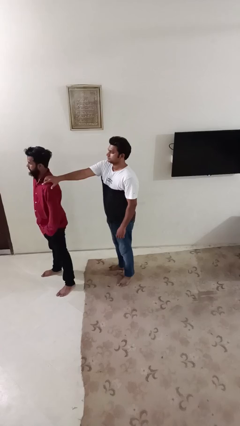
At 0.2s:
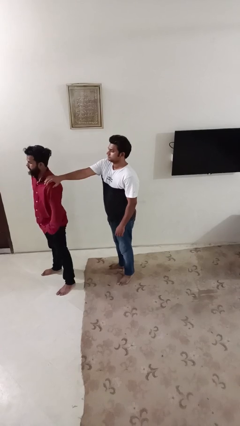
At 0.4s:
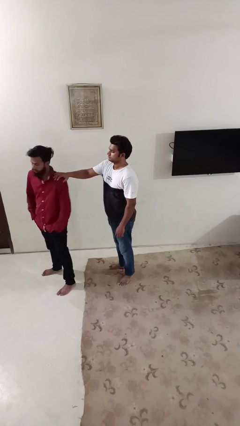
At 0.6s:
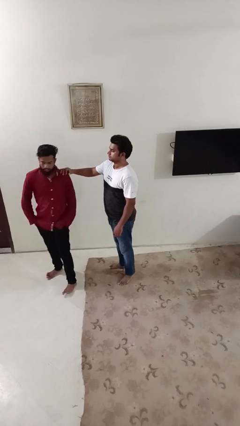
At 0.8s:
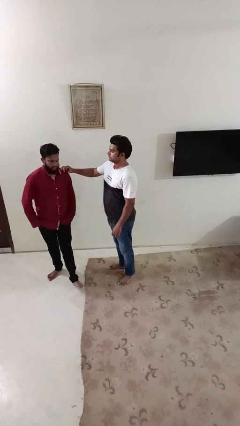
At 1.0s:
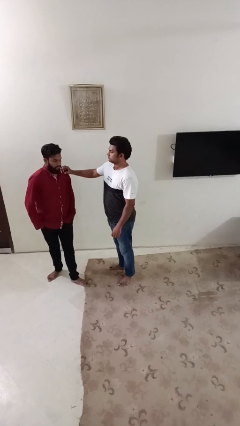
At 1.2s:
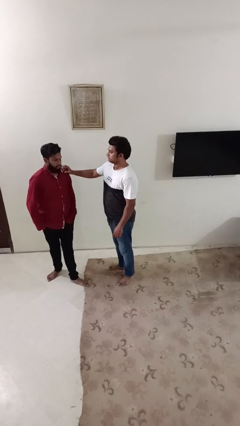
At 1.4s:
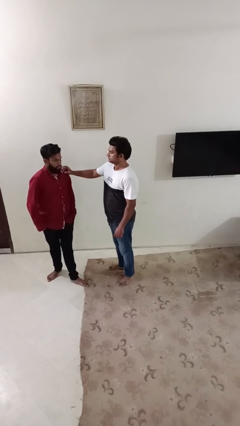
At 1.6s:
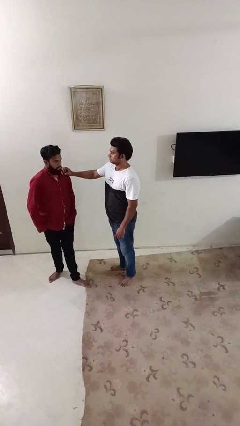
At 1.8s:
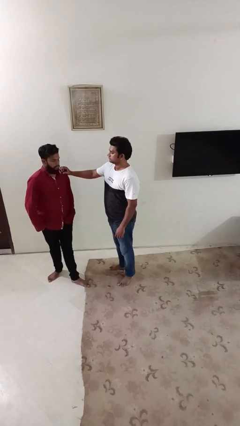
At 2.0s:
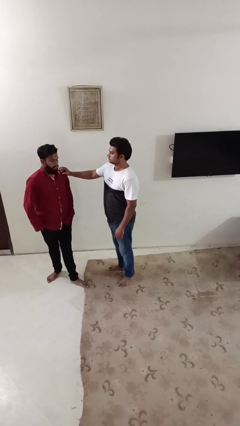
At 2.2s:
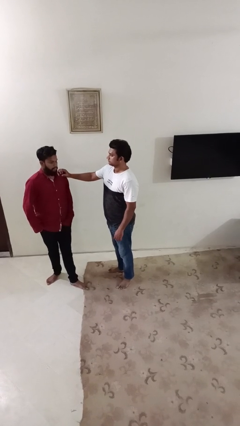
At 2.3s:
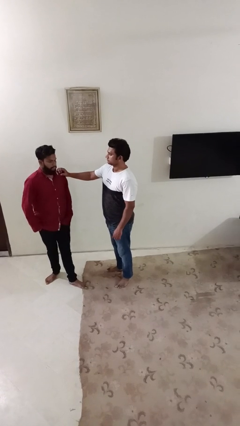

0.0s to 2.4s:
person spins person around

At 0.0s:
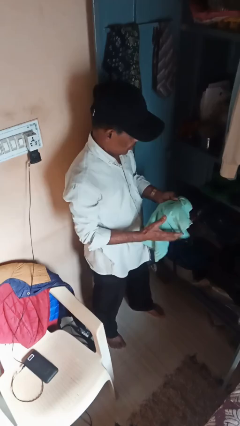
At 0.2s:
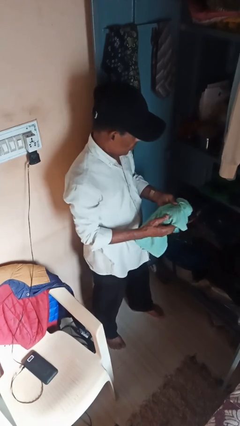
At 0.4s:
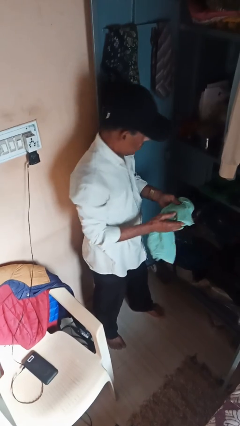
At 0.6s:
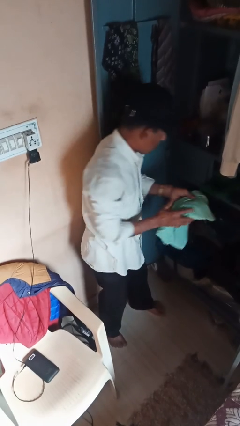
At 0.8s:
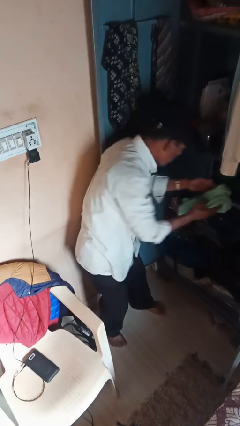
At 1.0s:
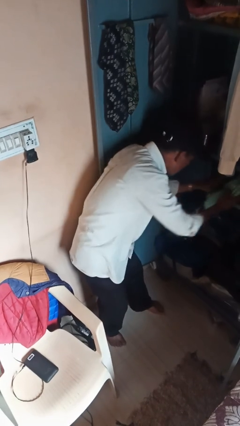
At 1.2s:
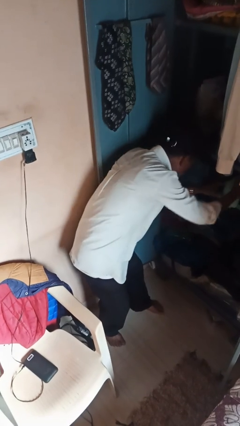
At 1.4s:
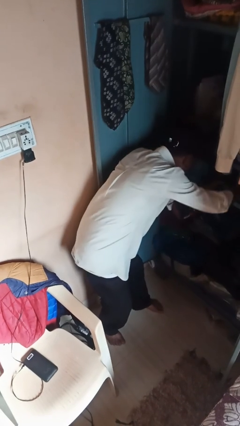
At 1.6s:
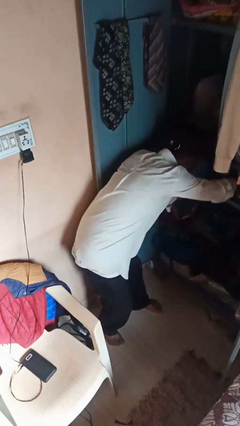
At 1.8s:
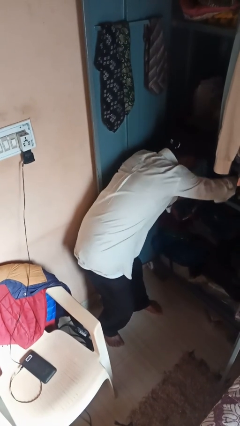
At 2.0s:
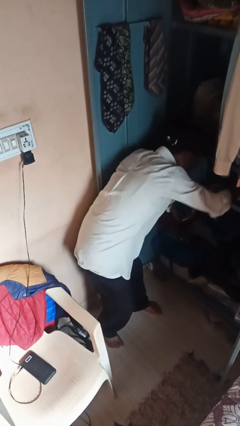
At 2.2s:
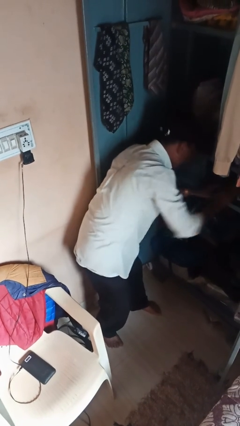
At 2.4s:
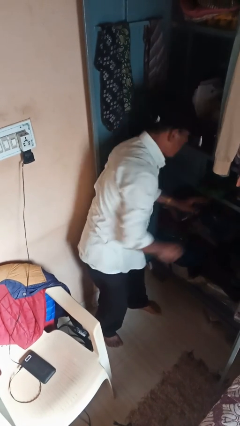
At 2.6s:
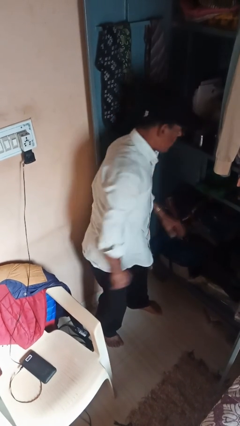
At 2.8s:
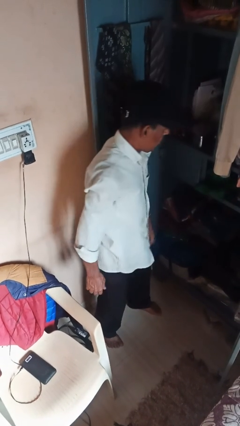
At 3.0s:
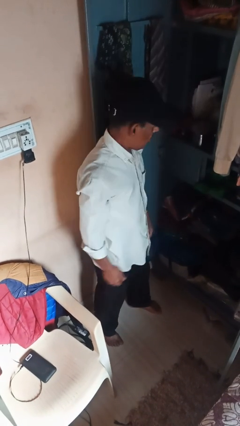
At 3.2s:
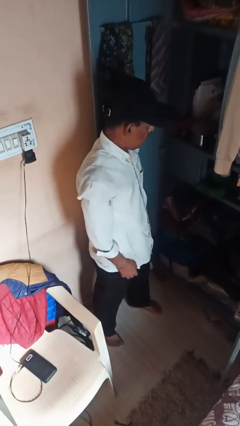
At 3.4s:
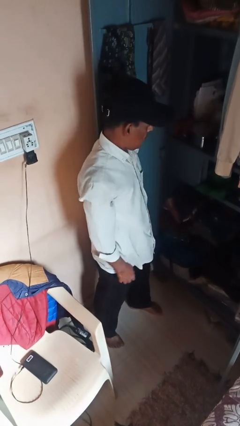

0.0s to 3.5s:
person puts clothes into dresser

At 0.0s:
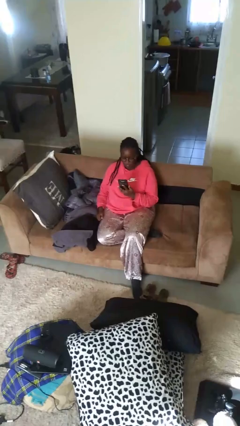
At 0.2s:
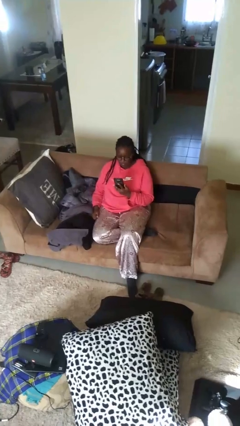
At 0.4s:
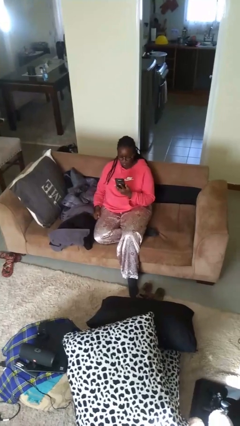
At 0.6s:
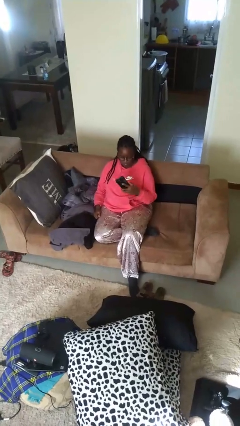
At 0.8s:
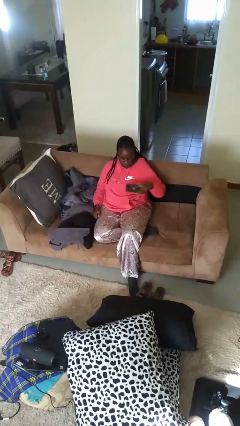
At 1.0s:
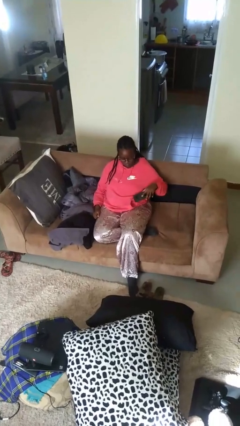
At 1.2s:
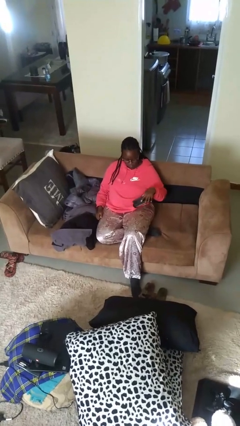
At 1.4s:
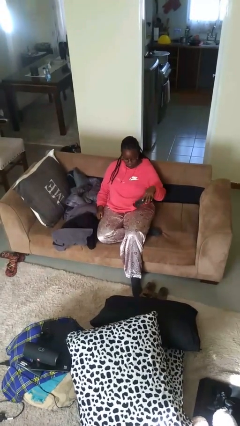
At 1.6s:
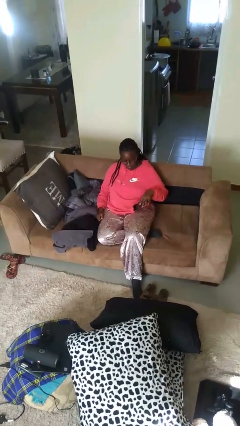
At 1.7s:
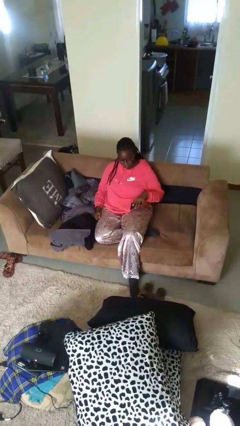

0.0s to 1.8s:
person puts phone into pocket

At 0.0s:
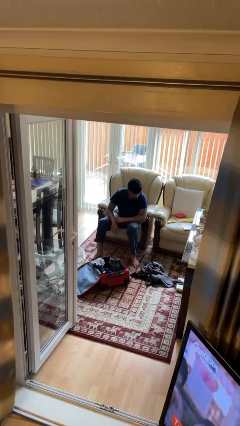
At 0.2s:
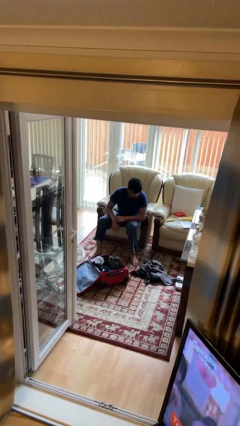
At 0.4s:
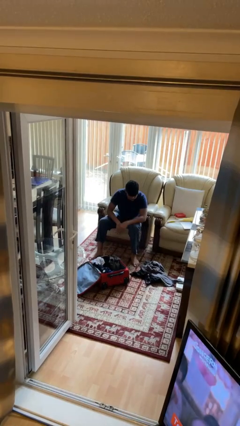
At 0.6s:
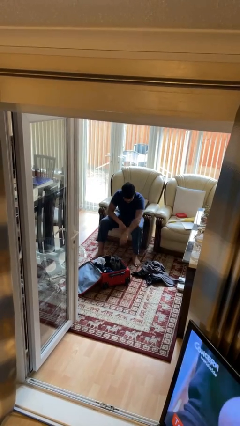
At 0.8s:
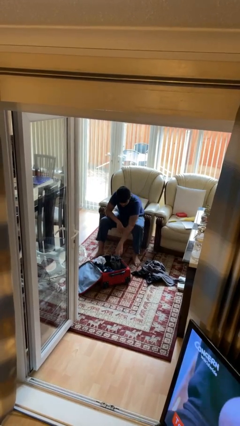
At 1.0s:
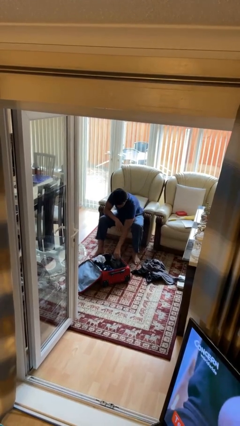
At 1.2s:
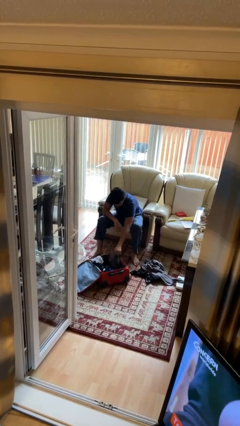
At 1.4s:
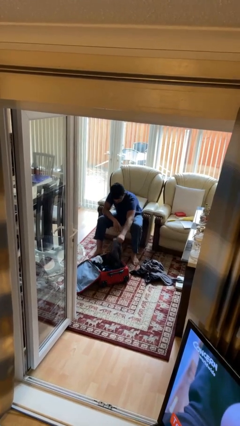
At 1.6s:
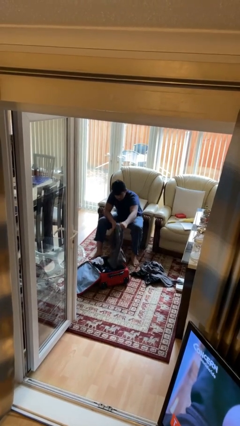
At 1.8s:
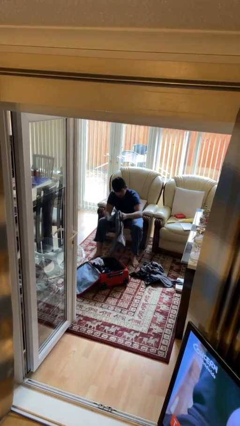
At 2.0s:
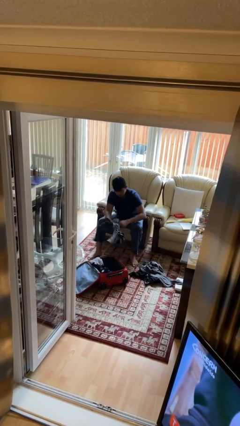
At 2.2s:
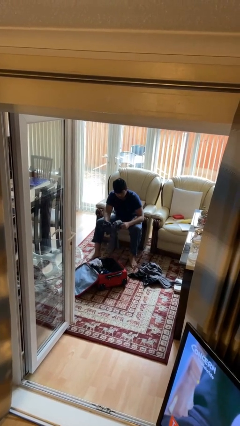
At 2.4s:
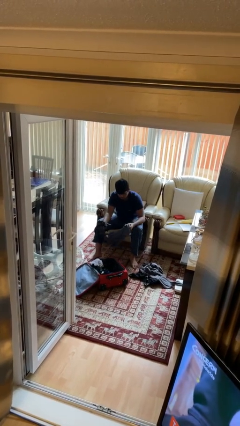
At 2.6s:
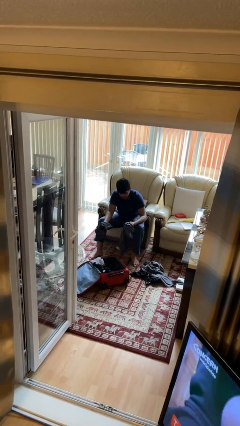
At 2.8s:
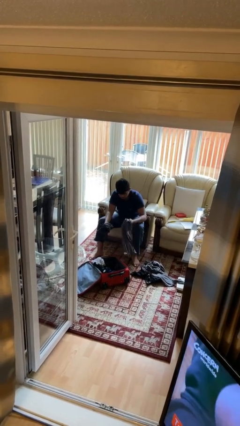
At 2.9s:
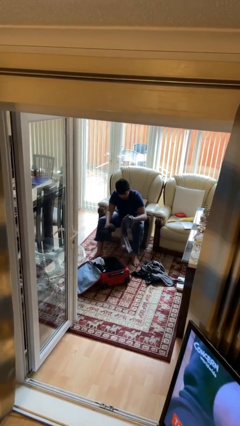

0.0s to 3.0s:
person unloads clothes from suitcase

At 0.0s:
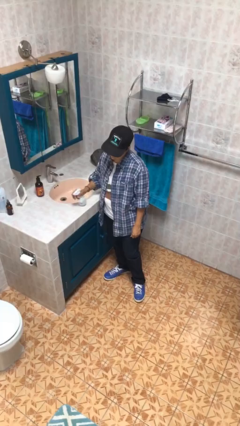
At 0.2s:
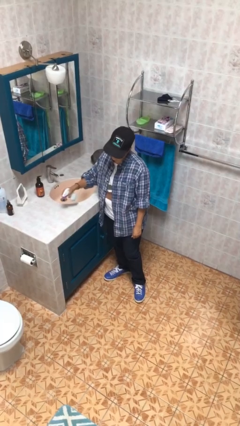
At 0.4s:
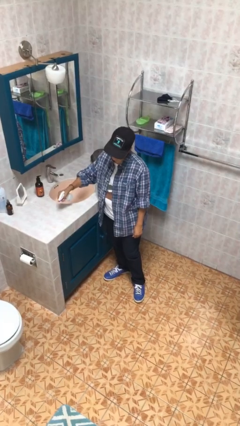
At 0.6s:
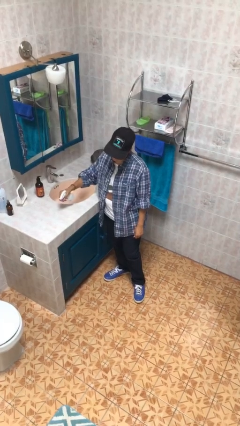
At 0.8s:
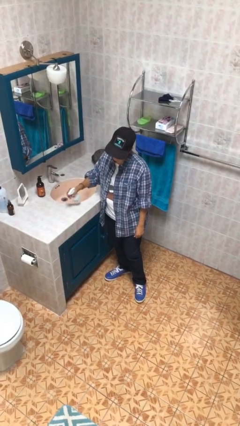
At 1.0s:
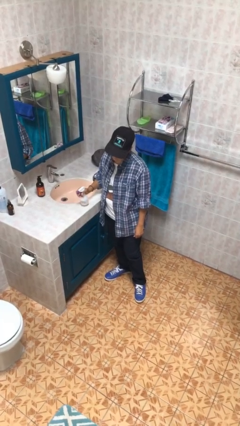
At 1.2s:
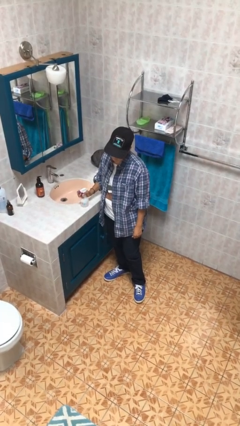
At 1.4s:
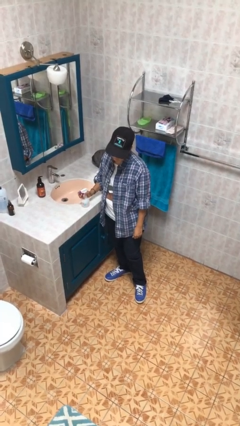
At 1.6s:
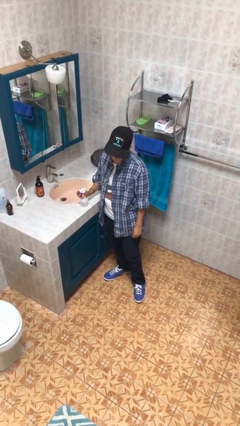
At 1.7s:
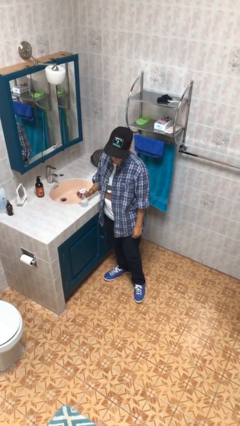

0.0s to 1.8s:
person sprays from bottle

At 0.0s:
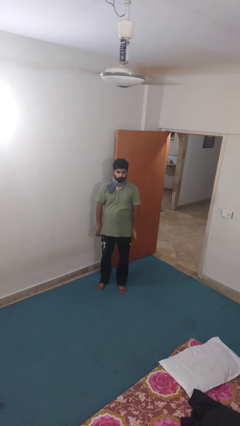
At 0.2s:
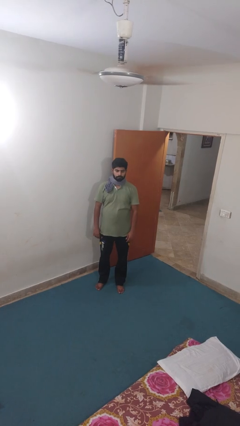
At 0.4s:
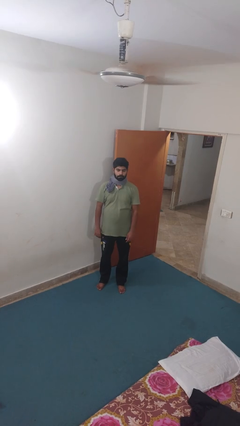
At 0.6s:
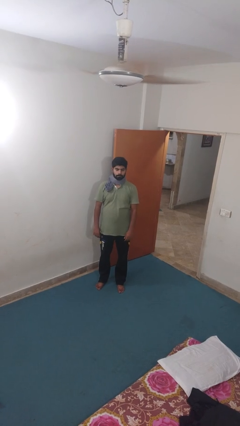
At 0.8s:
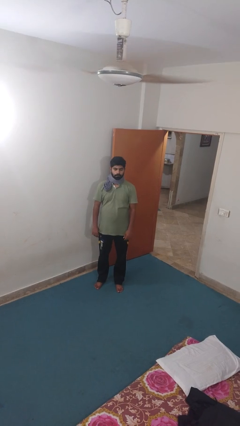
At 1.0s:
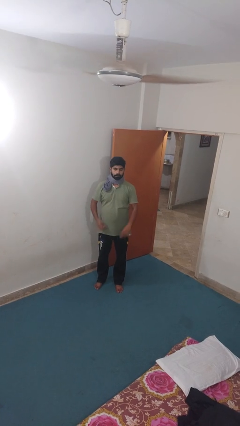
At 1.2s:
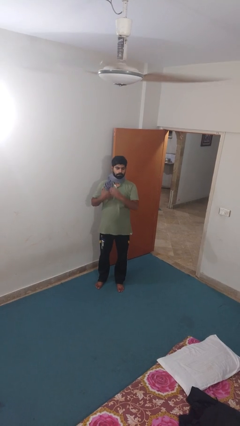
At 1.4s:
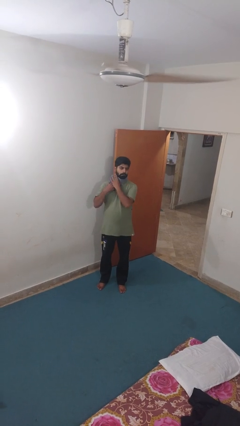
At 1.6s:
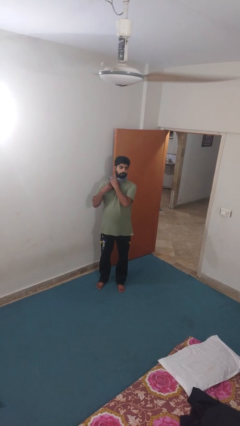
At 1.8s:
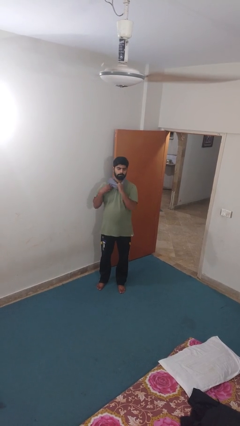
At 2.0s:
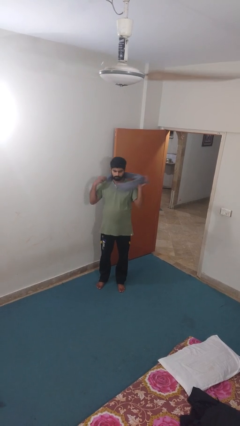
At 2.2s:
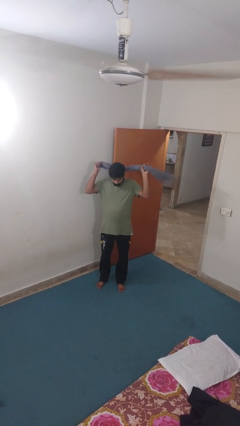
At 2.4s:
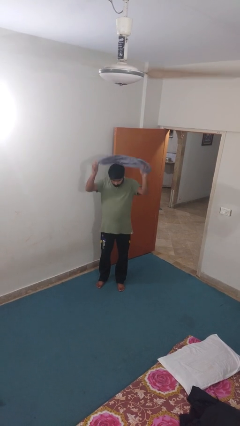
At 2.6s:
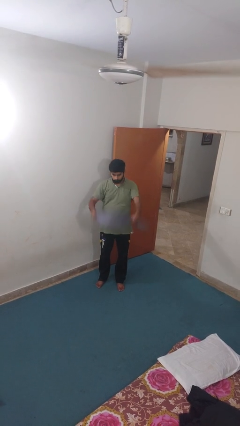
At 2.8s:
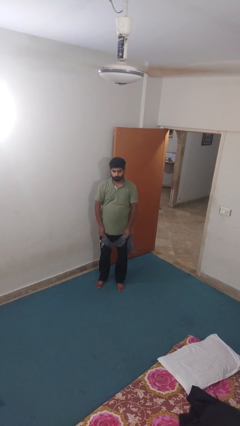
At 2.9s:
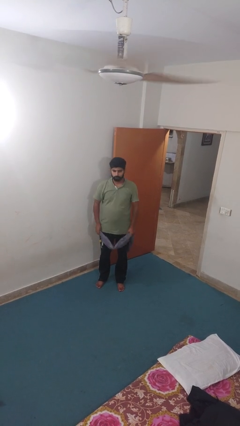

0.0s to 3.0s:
person takes off scarf

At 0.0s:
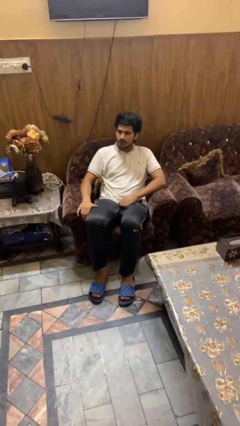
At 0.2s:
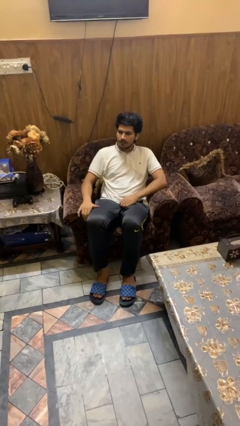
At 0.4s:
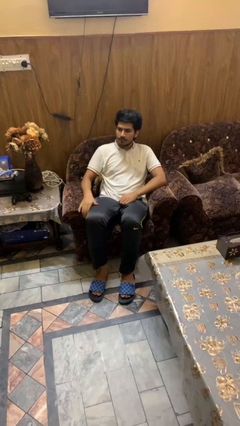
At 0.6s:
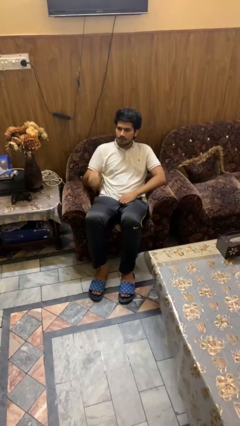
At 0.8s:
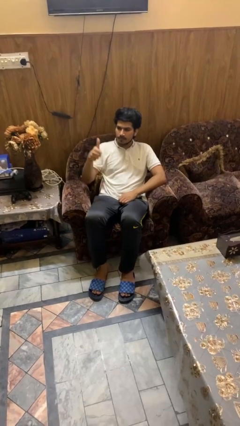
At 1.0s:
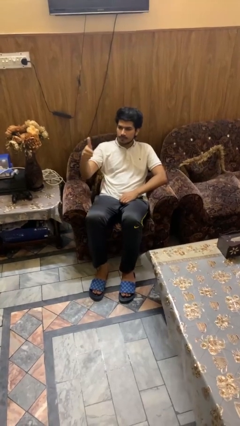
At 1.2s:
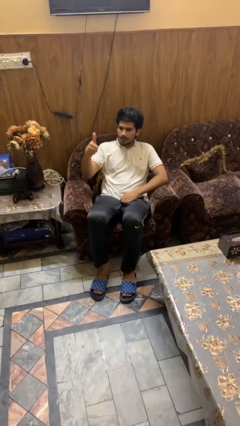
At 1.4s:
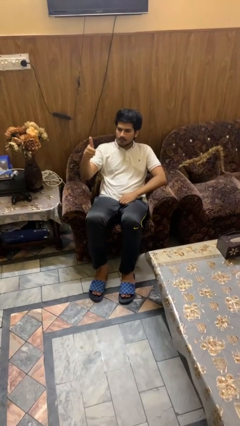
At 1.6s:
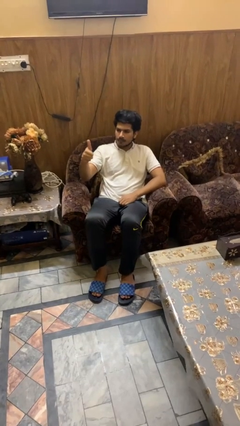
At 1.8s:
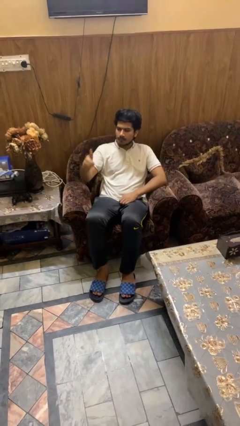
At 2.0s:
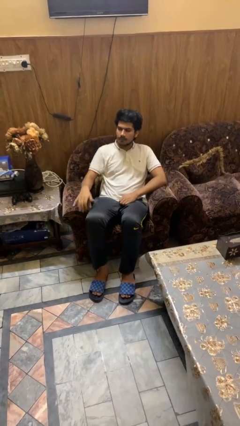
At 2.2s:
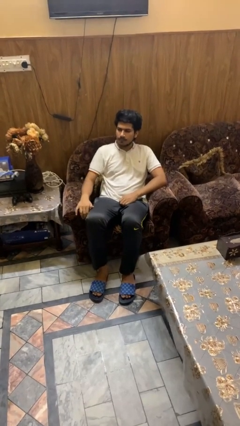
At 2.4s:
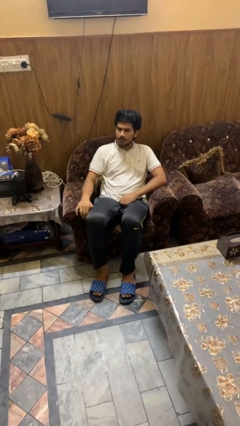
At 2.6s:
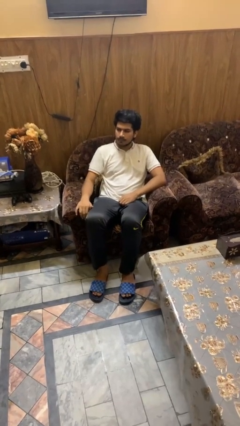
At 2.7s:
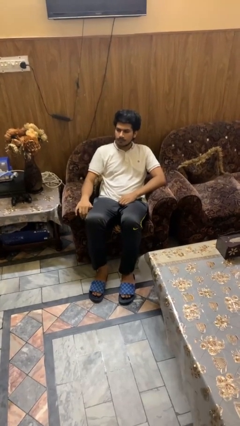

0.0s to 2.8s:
person gestures thumbs up
